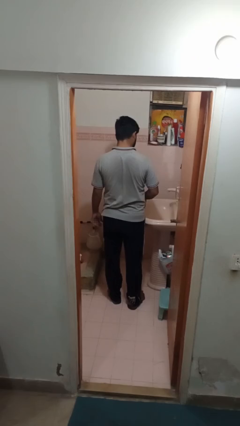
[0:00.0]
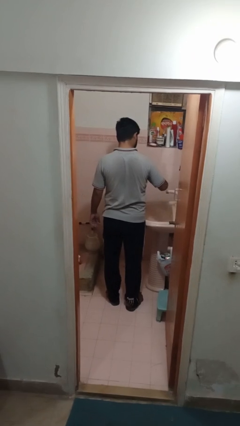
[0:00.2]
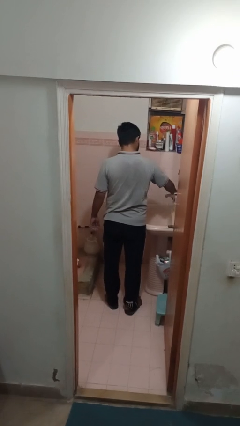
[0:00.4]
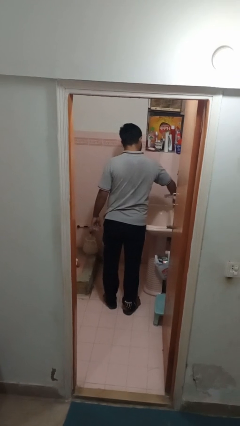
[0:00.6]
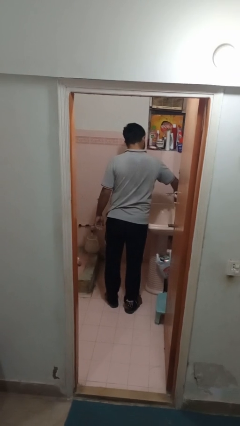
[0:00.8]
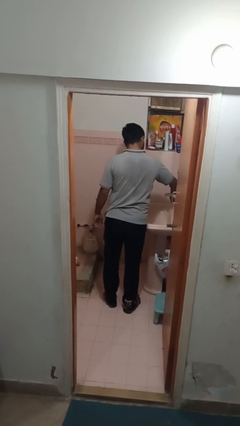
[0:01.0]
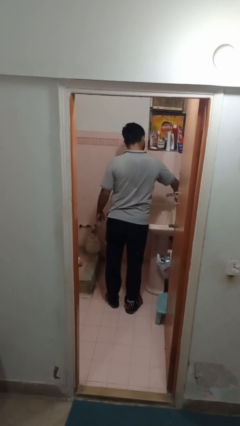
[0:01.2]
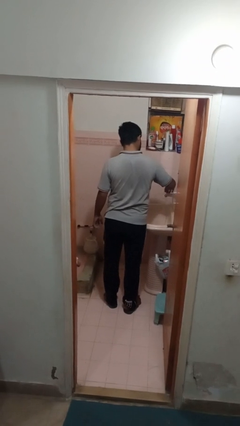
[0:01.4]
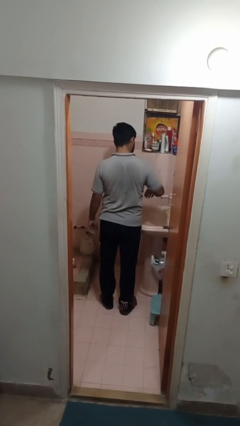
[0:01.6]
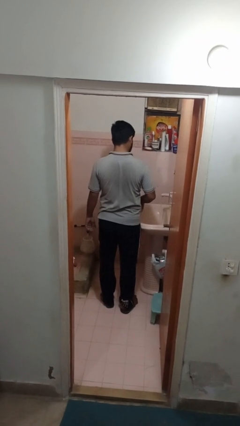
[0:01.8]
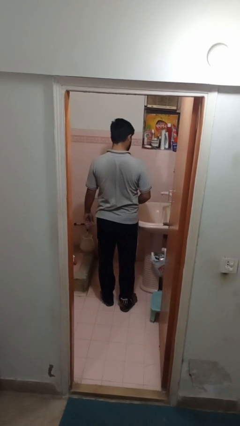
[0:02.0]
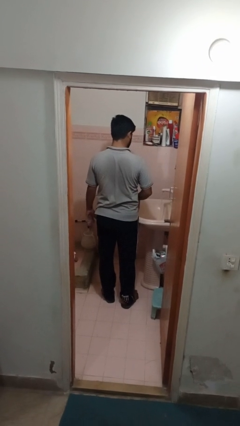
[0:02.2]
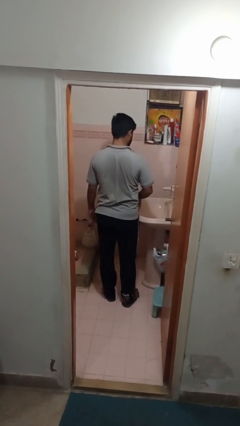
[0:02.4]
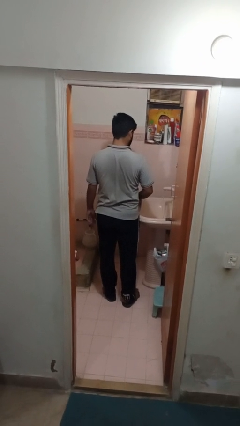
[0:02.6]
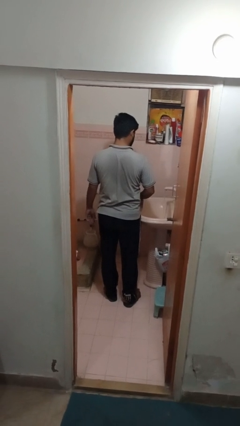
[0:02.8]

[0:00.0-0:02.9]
person turns on faucet

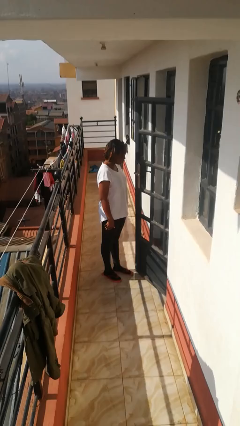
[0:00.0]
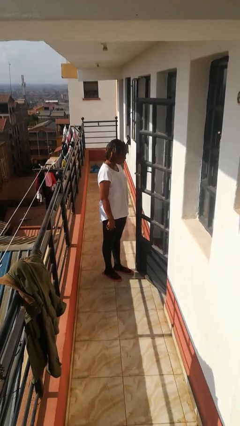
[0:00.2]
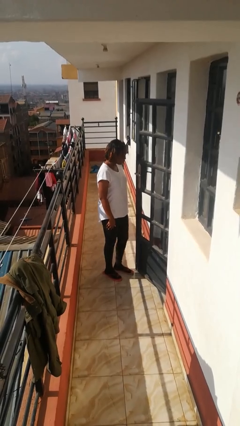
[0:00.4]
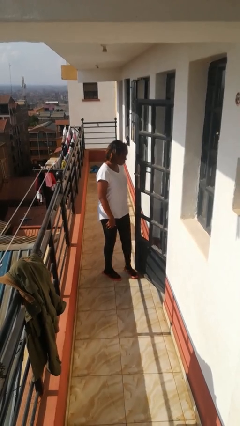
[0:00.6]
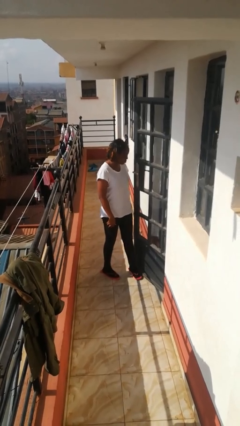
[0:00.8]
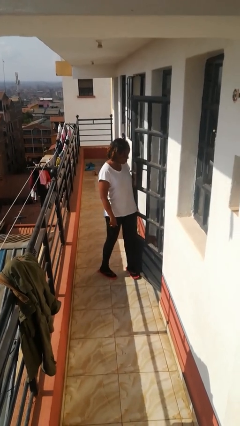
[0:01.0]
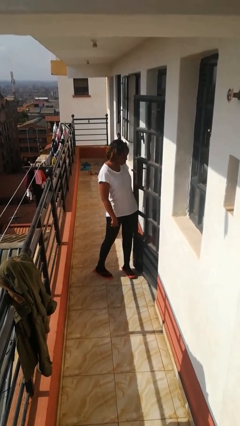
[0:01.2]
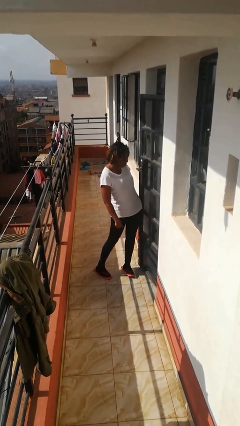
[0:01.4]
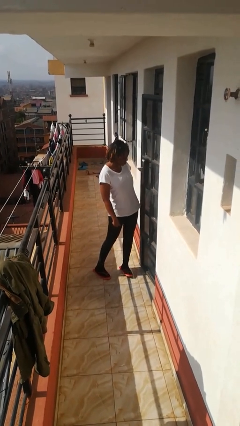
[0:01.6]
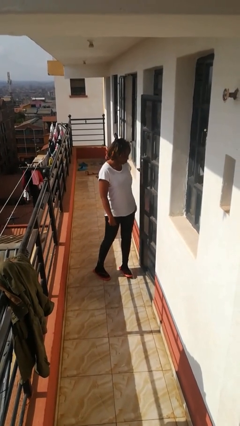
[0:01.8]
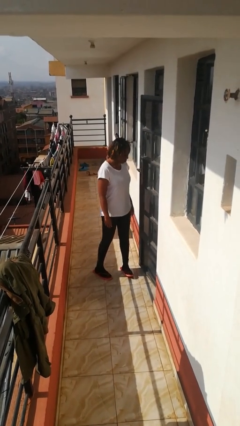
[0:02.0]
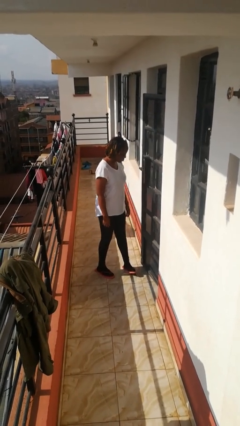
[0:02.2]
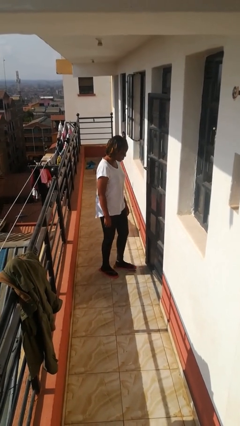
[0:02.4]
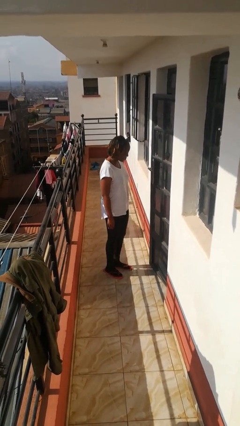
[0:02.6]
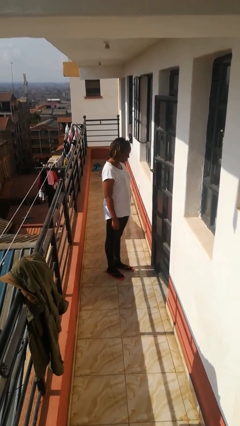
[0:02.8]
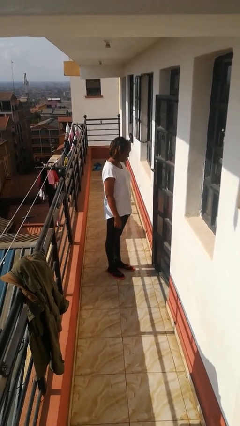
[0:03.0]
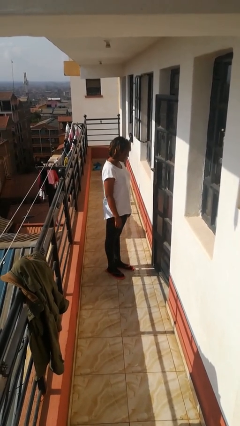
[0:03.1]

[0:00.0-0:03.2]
person closes door with hip

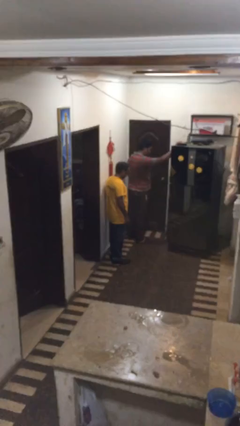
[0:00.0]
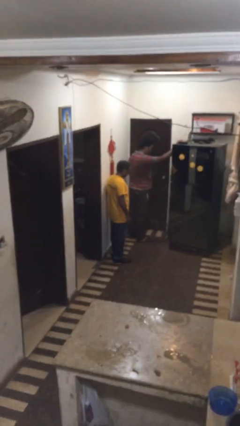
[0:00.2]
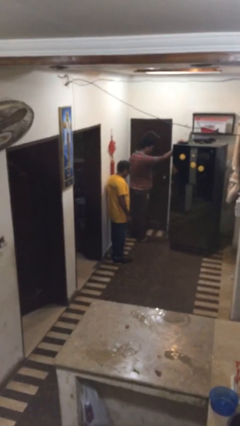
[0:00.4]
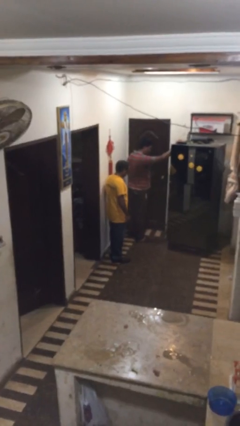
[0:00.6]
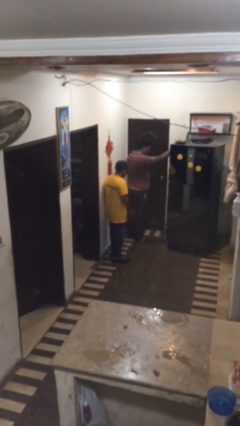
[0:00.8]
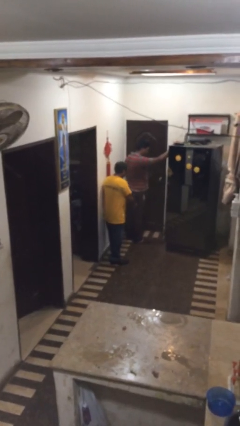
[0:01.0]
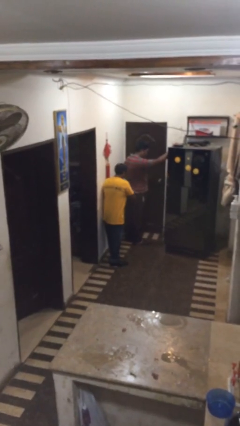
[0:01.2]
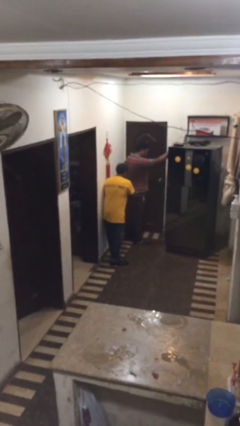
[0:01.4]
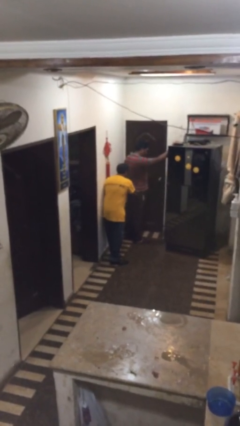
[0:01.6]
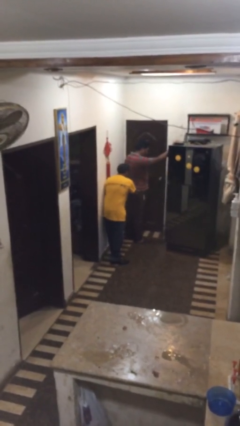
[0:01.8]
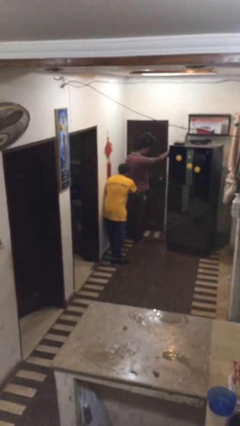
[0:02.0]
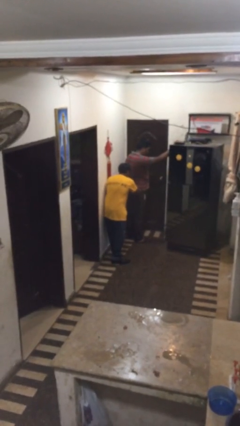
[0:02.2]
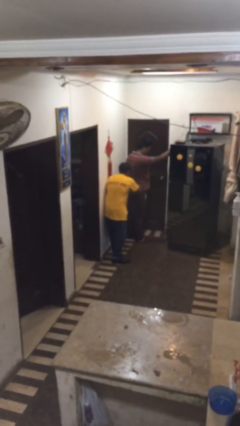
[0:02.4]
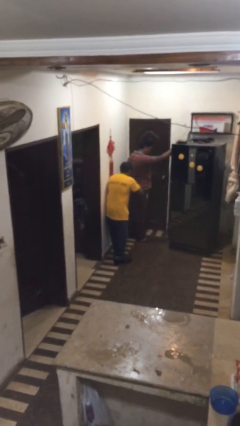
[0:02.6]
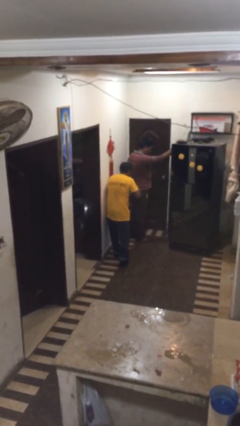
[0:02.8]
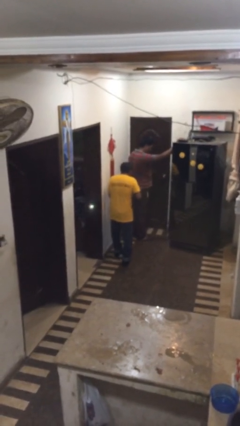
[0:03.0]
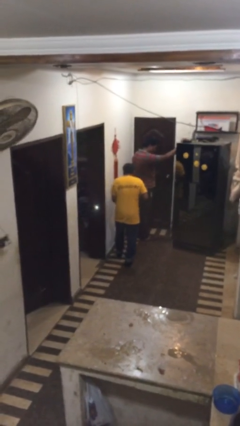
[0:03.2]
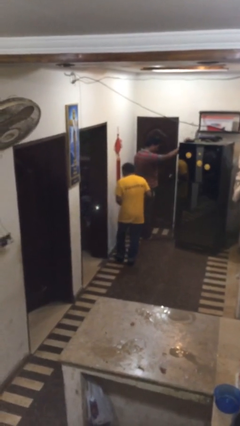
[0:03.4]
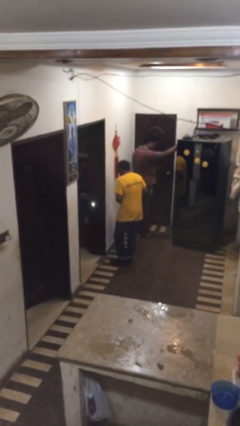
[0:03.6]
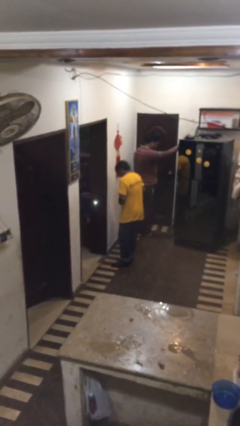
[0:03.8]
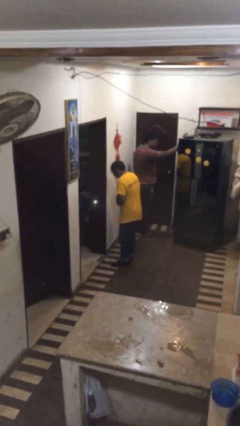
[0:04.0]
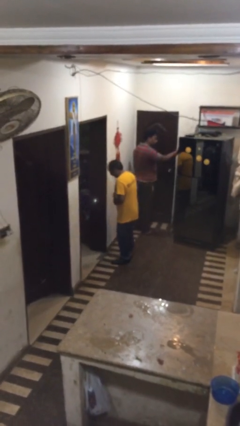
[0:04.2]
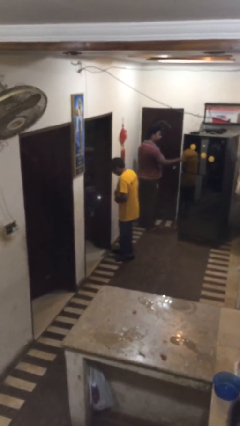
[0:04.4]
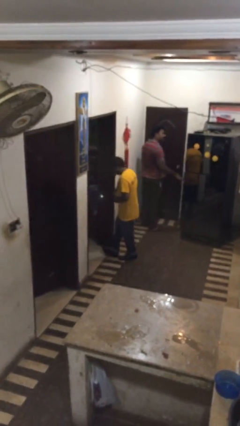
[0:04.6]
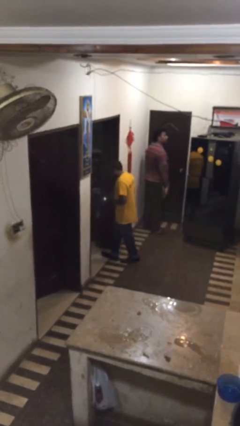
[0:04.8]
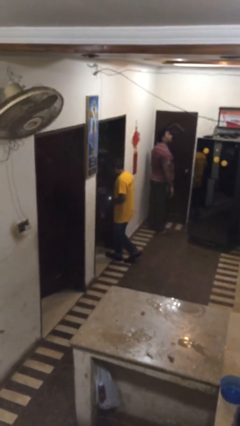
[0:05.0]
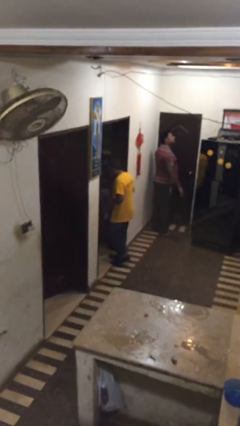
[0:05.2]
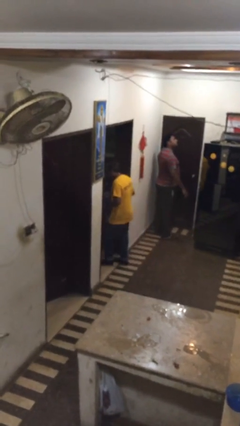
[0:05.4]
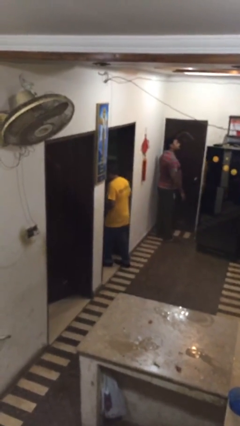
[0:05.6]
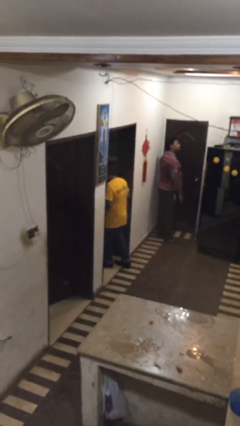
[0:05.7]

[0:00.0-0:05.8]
person steals object from person

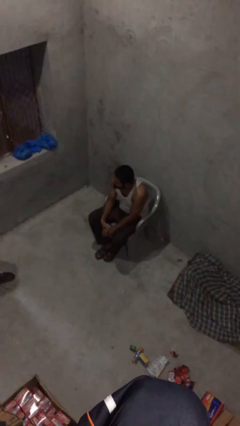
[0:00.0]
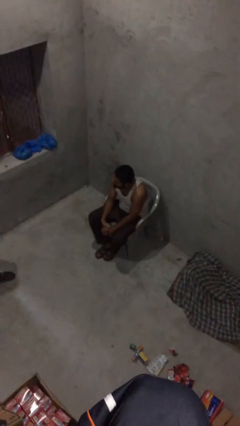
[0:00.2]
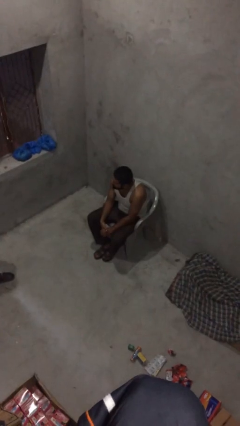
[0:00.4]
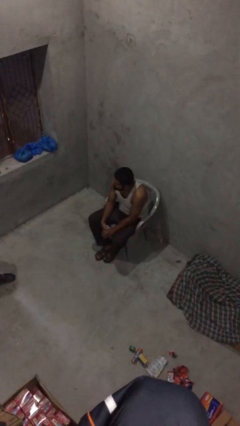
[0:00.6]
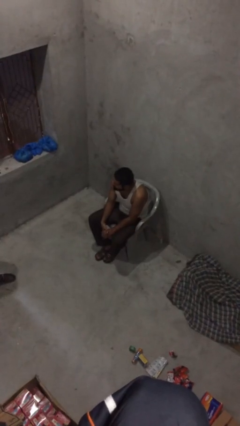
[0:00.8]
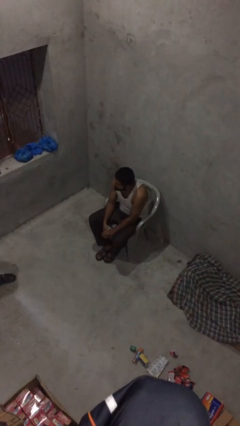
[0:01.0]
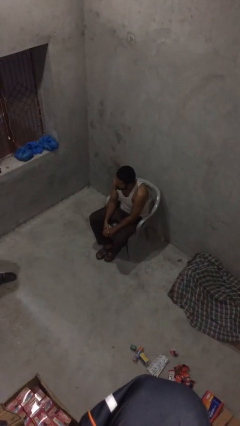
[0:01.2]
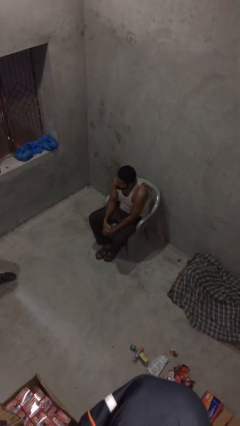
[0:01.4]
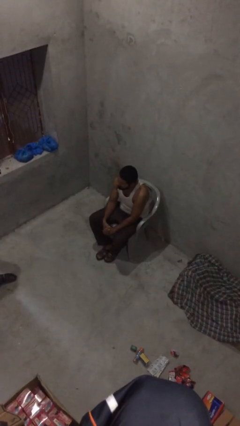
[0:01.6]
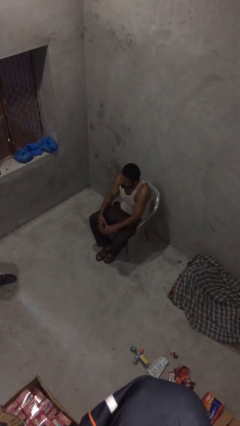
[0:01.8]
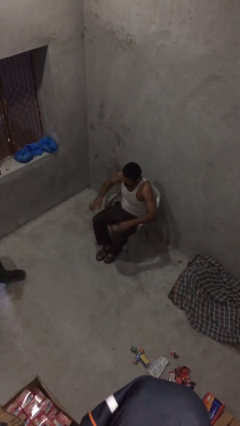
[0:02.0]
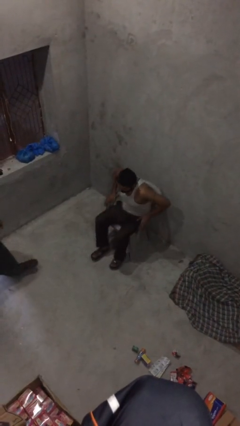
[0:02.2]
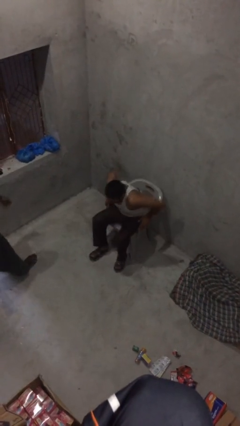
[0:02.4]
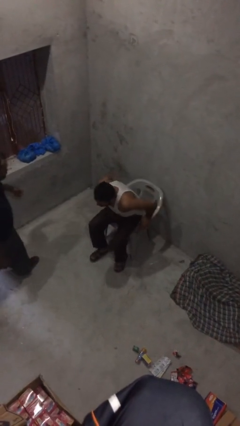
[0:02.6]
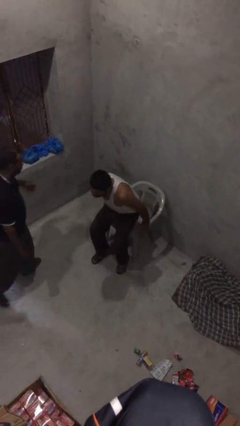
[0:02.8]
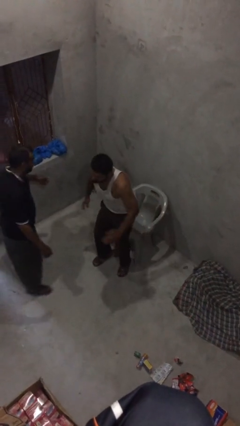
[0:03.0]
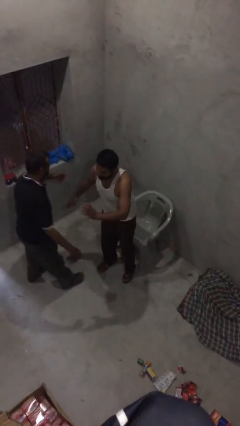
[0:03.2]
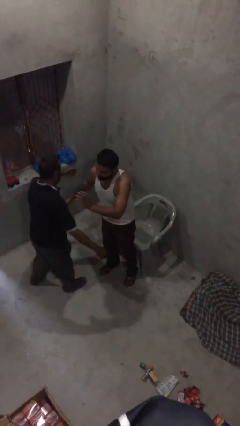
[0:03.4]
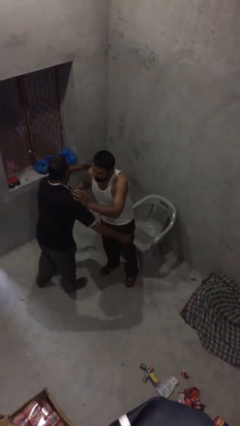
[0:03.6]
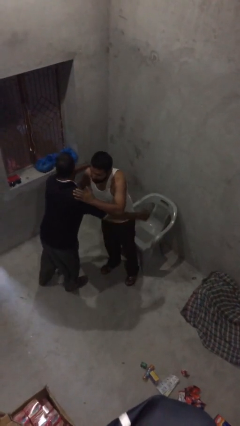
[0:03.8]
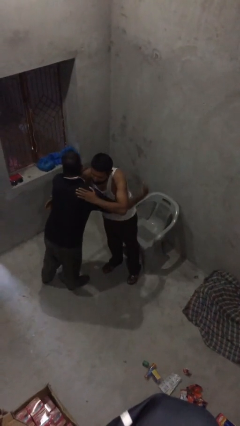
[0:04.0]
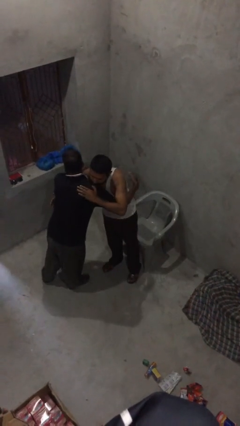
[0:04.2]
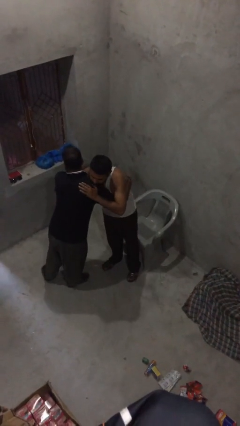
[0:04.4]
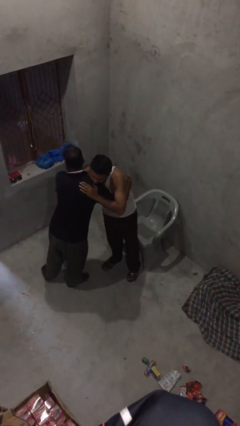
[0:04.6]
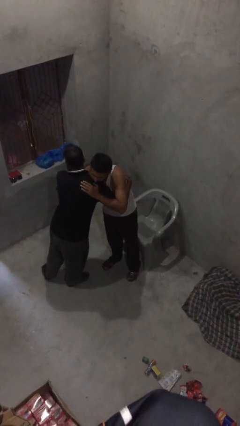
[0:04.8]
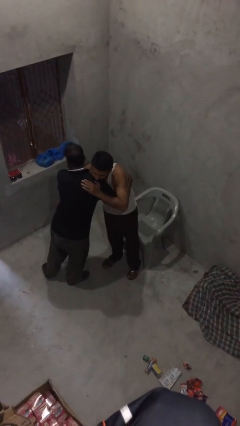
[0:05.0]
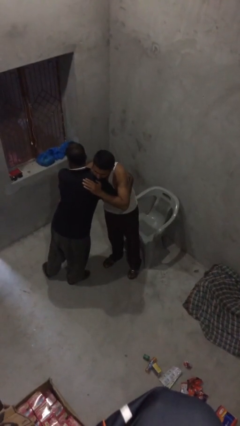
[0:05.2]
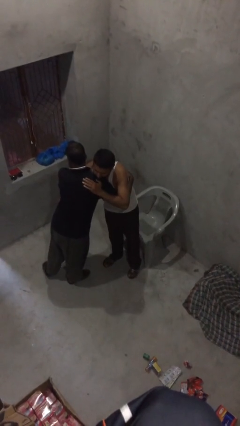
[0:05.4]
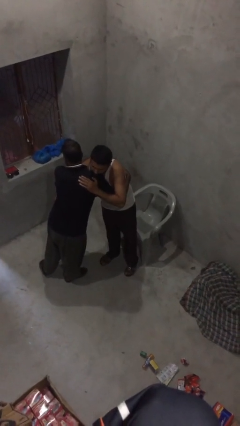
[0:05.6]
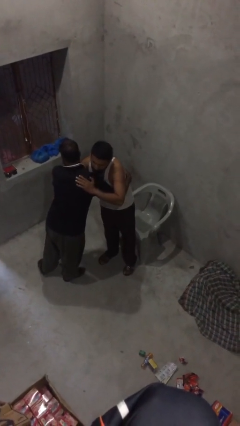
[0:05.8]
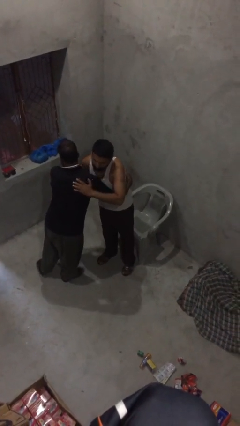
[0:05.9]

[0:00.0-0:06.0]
person embraces person

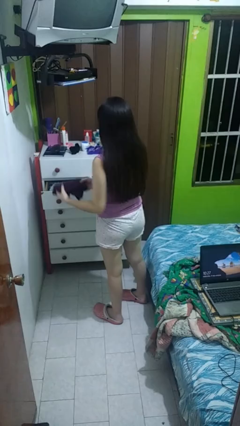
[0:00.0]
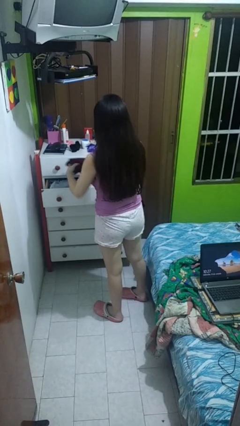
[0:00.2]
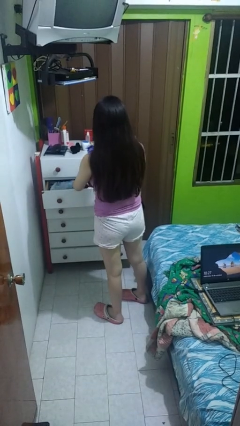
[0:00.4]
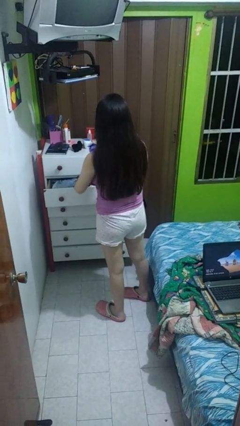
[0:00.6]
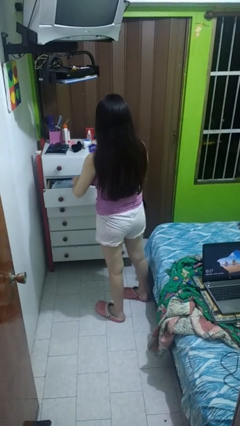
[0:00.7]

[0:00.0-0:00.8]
person puts clothes into dresser
